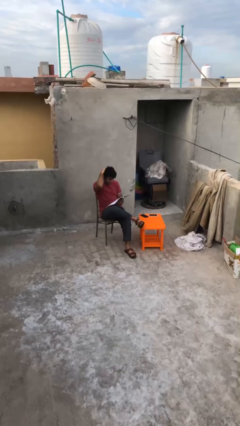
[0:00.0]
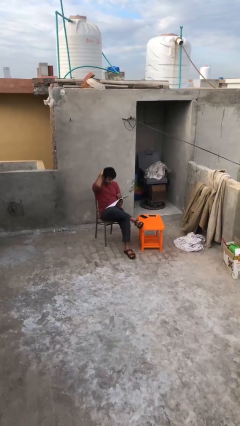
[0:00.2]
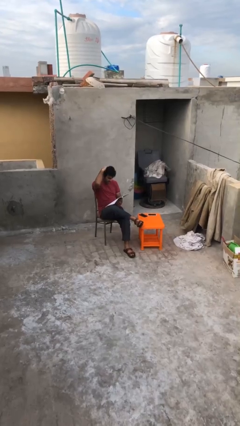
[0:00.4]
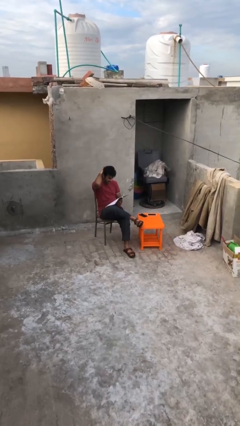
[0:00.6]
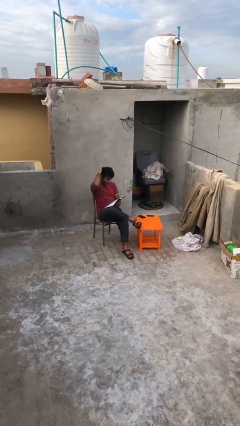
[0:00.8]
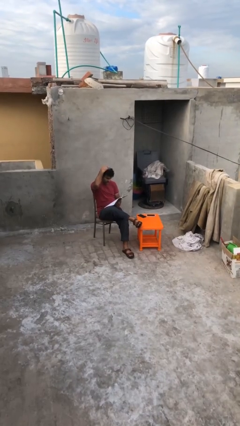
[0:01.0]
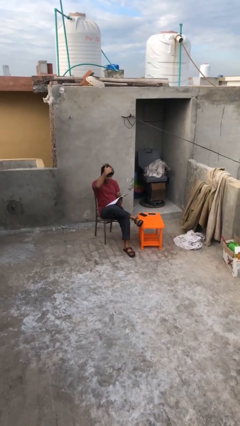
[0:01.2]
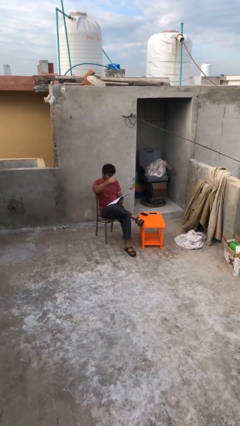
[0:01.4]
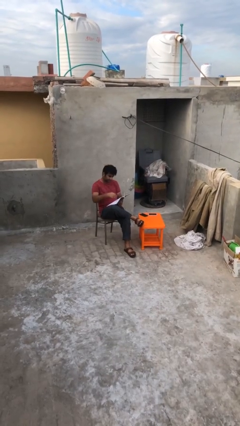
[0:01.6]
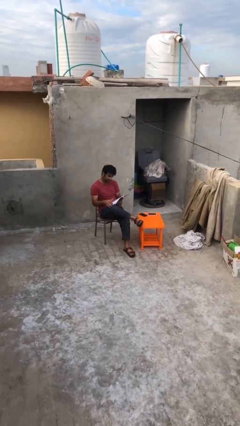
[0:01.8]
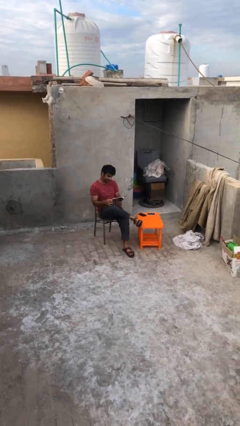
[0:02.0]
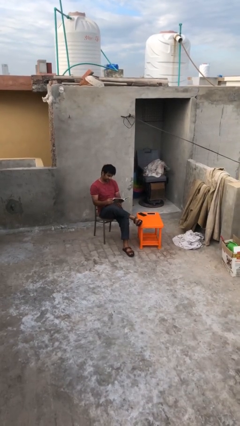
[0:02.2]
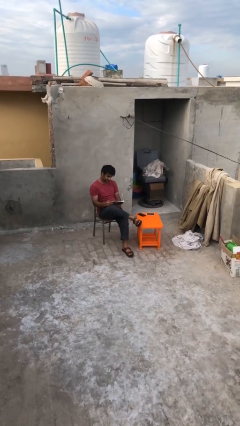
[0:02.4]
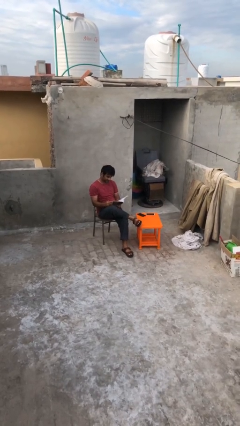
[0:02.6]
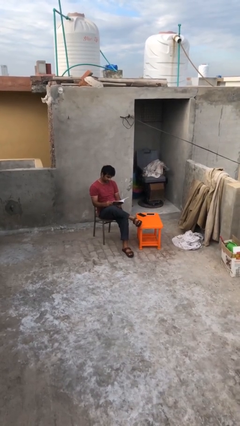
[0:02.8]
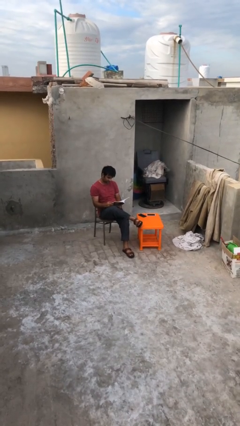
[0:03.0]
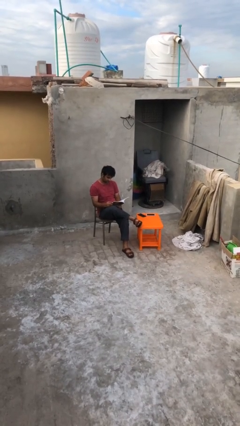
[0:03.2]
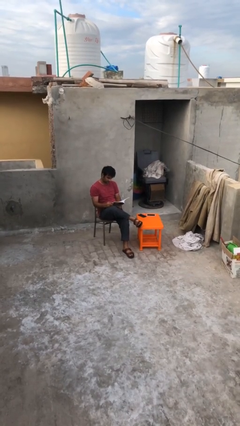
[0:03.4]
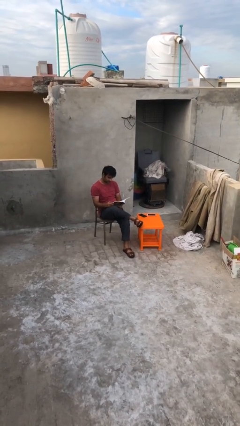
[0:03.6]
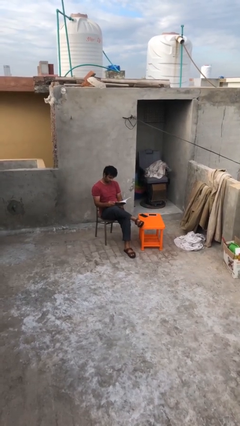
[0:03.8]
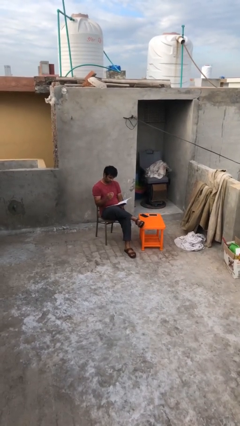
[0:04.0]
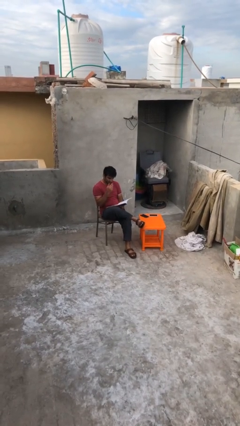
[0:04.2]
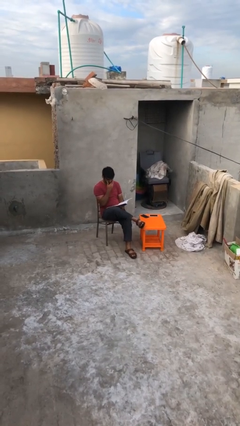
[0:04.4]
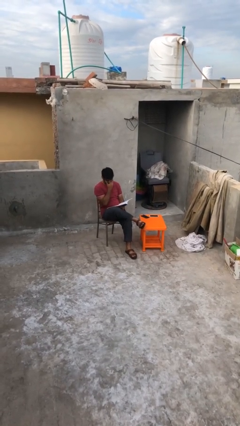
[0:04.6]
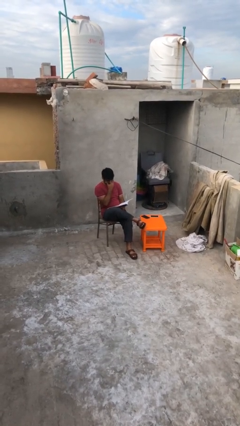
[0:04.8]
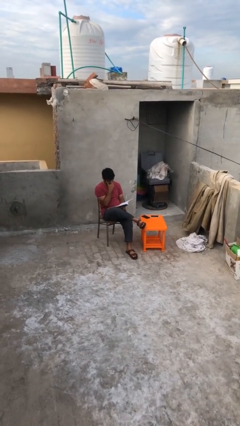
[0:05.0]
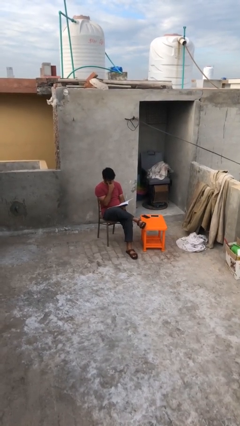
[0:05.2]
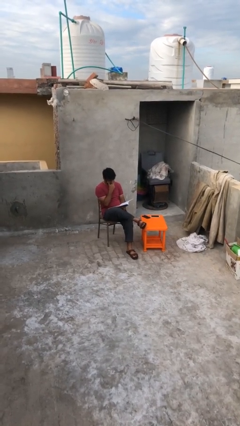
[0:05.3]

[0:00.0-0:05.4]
person reads document

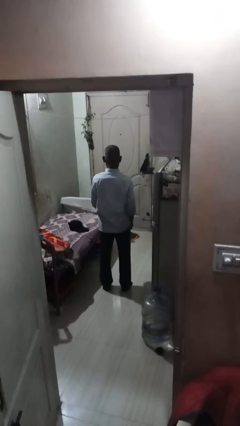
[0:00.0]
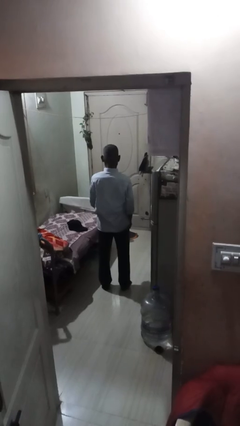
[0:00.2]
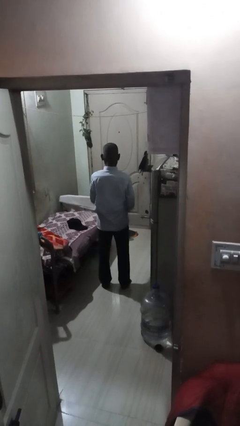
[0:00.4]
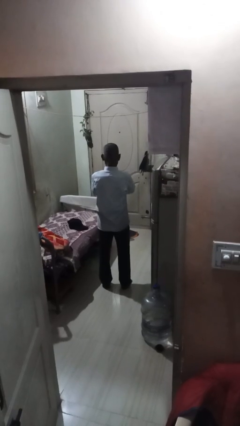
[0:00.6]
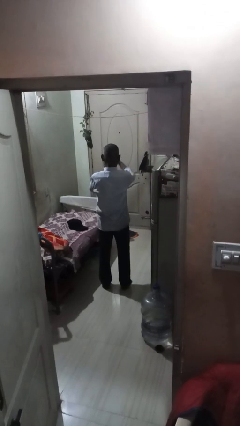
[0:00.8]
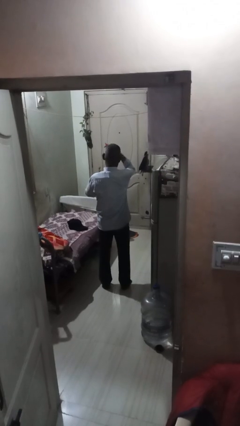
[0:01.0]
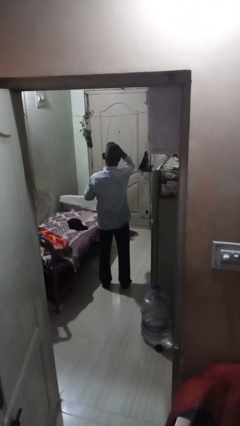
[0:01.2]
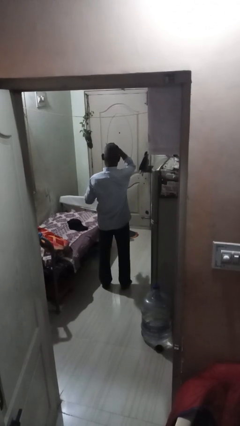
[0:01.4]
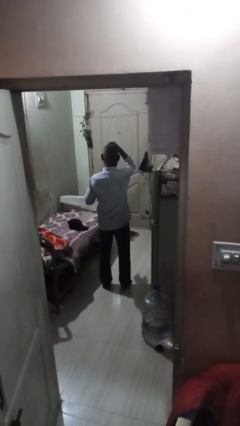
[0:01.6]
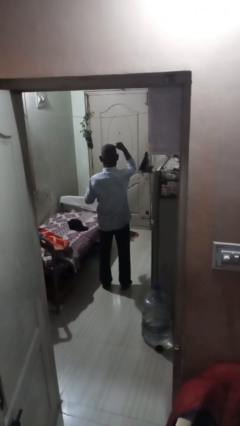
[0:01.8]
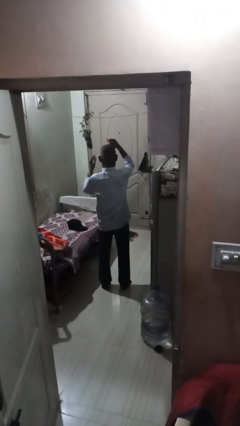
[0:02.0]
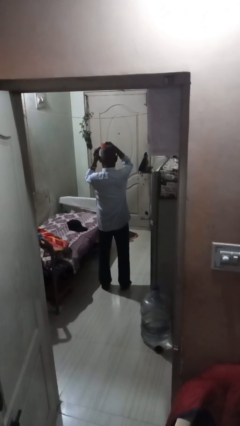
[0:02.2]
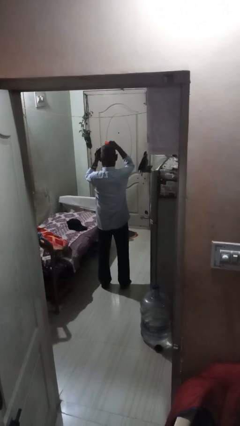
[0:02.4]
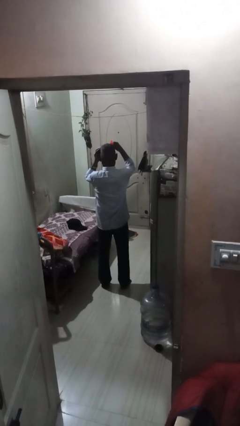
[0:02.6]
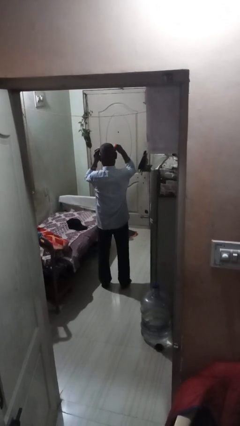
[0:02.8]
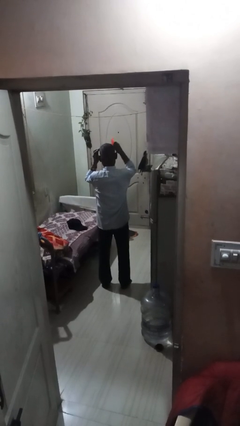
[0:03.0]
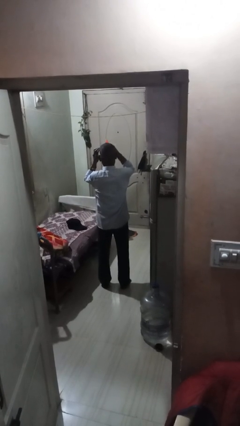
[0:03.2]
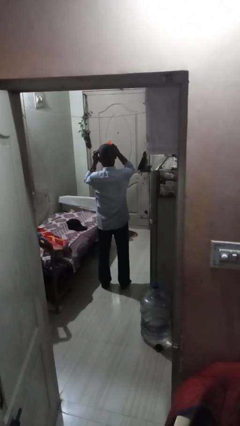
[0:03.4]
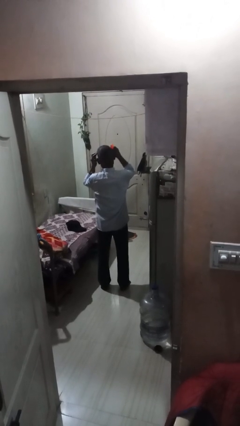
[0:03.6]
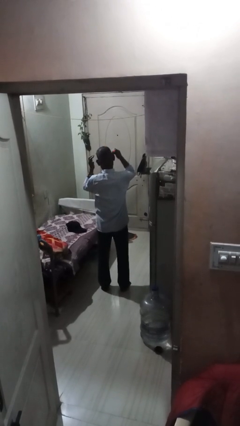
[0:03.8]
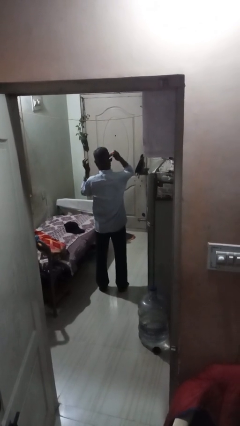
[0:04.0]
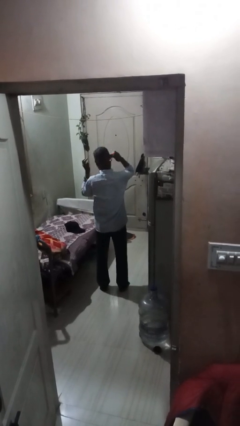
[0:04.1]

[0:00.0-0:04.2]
person brushes hair

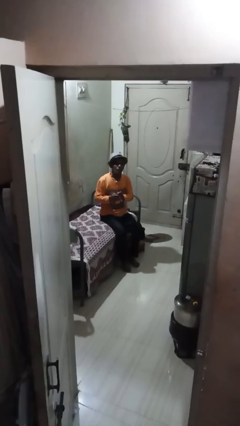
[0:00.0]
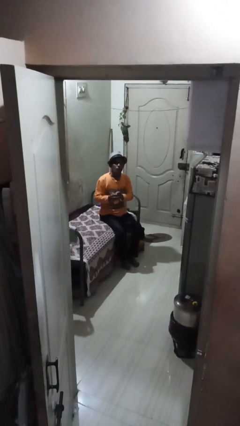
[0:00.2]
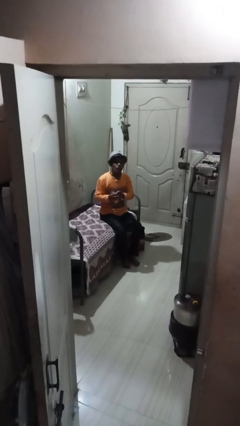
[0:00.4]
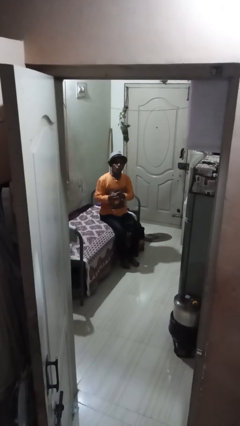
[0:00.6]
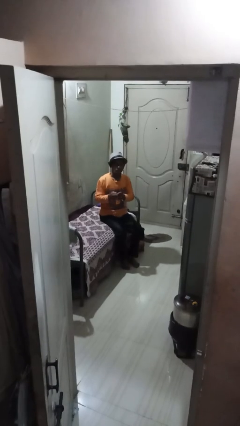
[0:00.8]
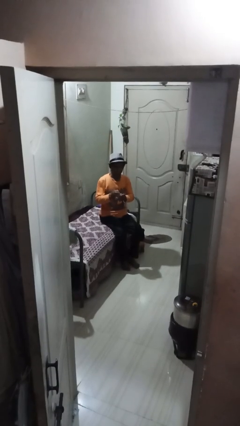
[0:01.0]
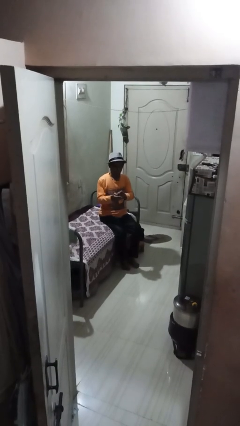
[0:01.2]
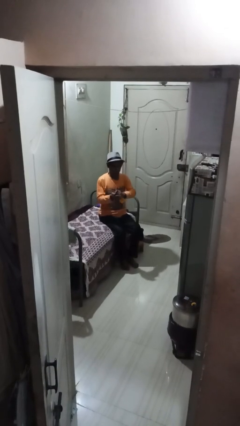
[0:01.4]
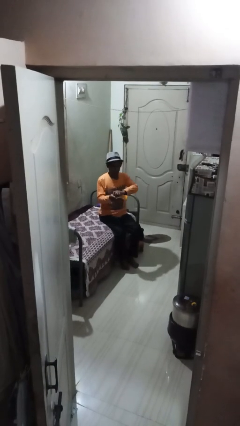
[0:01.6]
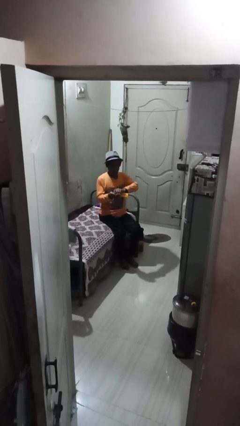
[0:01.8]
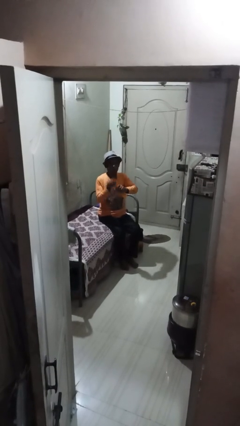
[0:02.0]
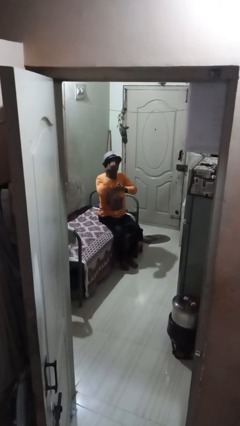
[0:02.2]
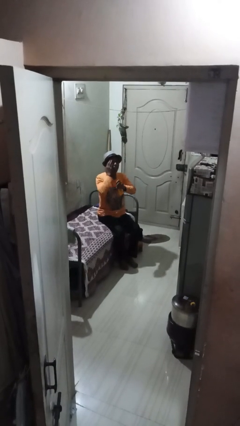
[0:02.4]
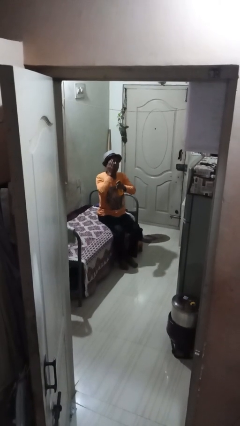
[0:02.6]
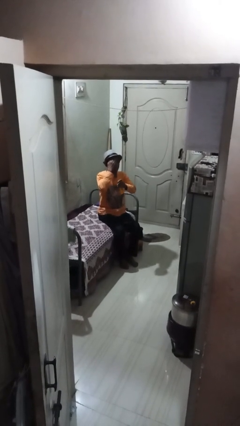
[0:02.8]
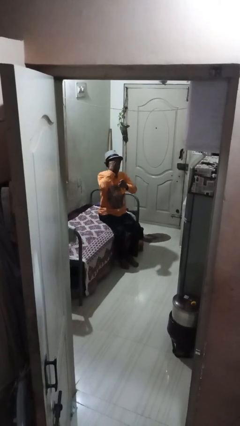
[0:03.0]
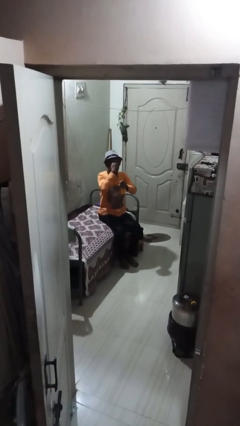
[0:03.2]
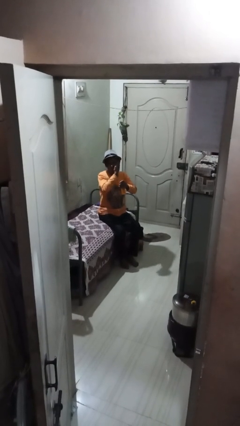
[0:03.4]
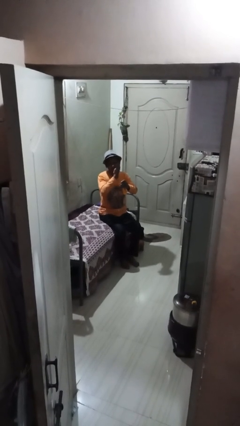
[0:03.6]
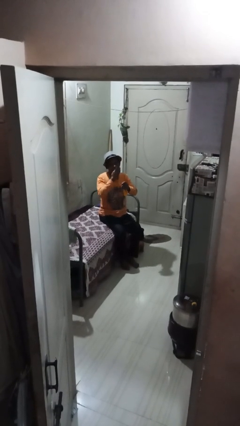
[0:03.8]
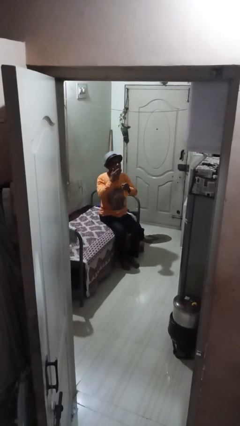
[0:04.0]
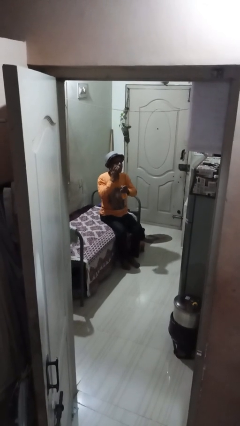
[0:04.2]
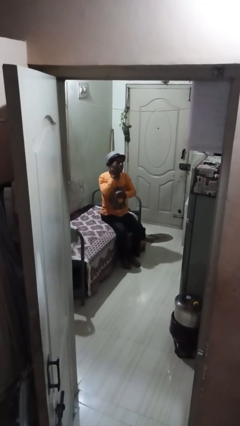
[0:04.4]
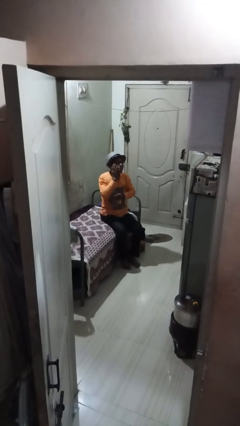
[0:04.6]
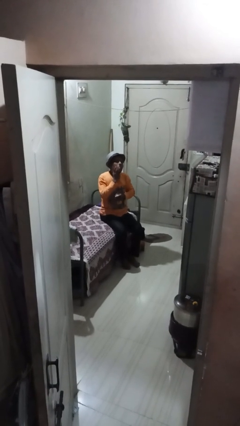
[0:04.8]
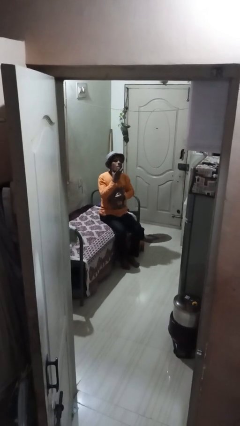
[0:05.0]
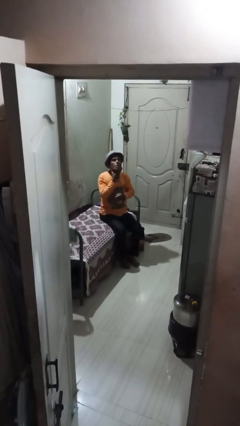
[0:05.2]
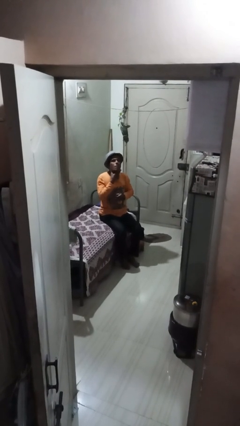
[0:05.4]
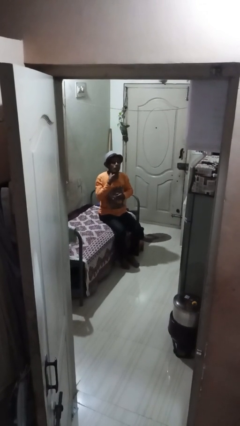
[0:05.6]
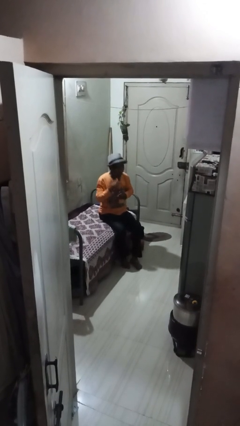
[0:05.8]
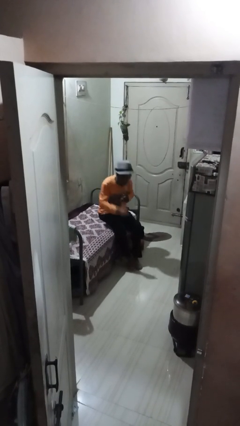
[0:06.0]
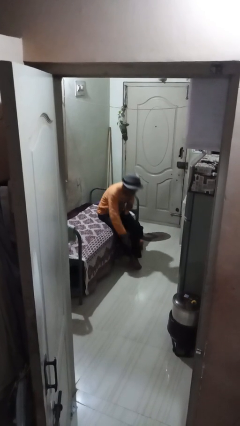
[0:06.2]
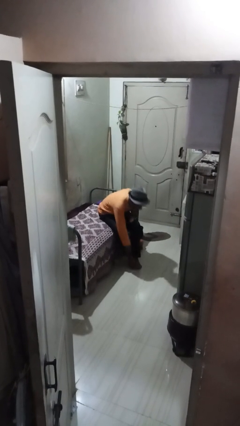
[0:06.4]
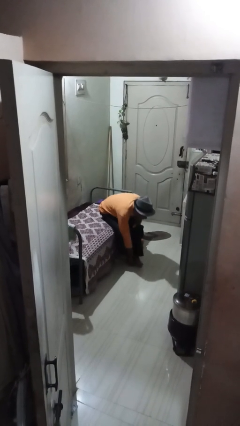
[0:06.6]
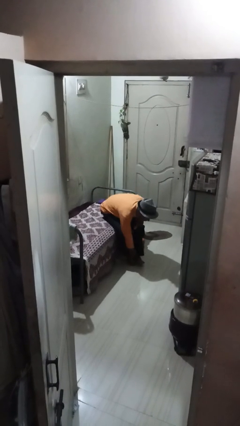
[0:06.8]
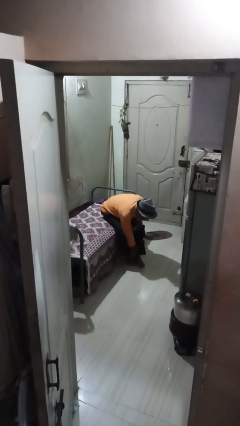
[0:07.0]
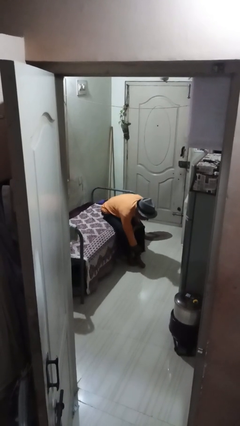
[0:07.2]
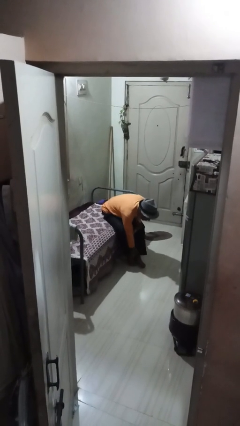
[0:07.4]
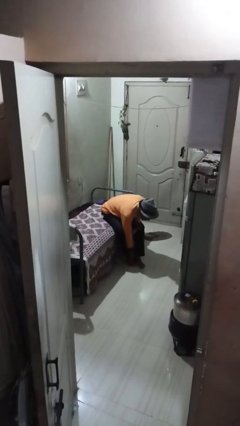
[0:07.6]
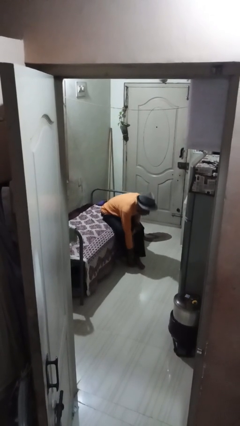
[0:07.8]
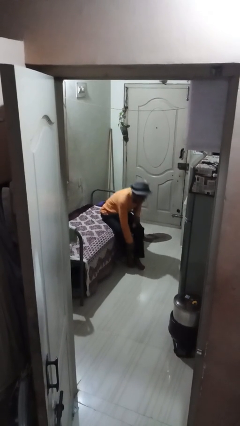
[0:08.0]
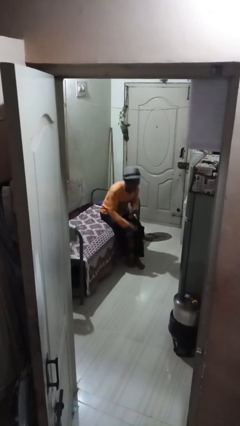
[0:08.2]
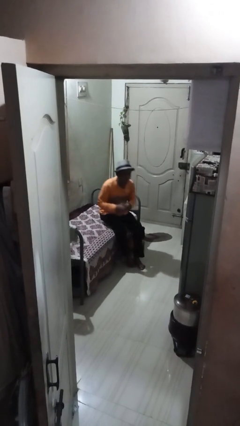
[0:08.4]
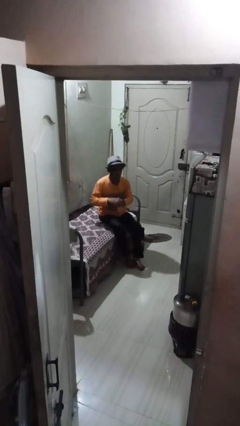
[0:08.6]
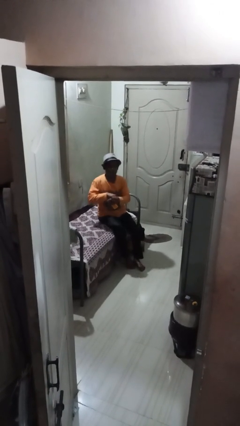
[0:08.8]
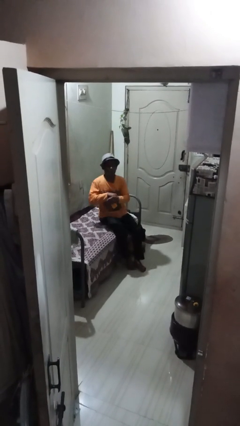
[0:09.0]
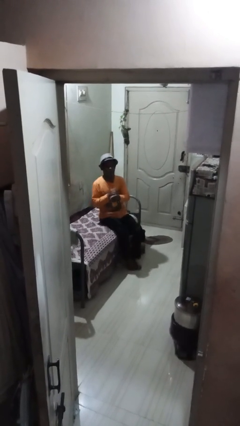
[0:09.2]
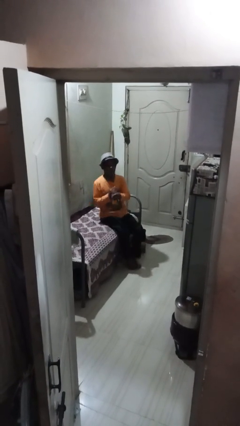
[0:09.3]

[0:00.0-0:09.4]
person applies sunscreen
